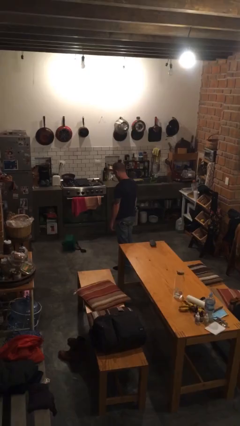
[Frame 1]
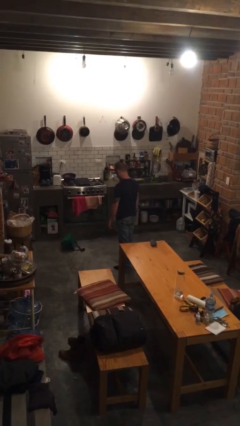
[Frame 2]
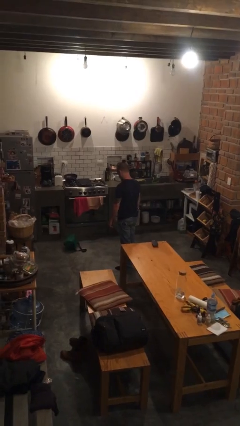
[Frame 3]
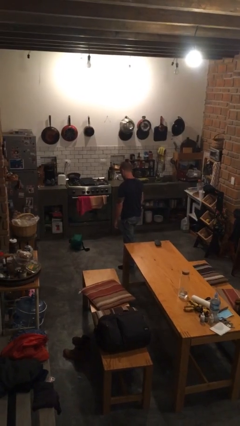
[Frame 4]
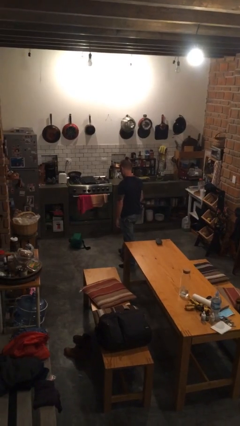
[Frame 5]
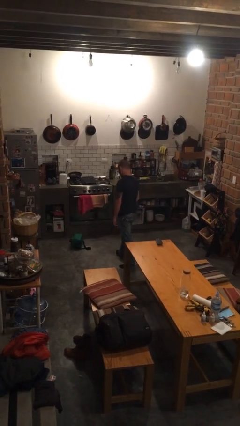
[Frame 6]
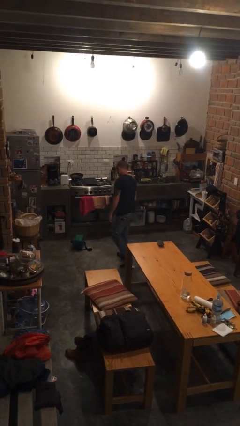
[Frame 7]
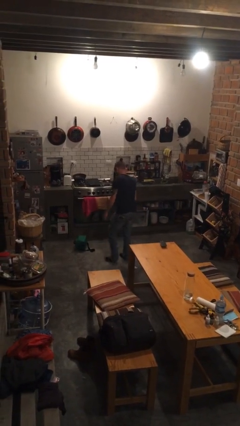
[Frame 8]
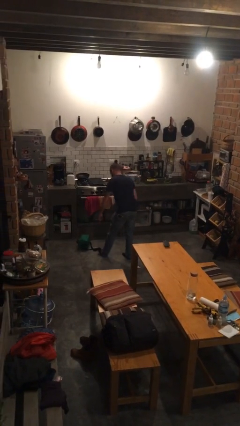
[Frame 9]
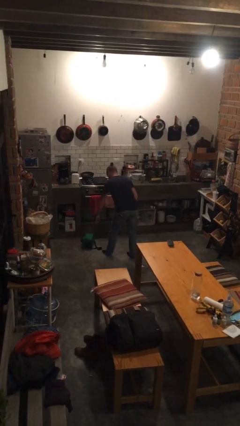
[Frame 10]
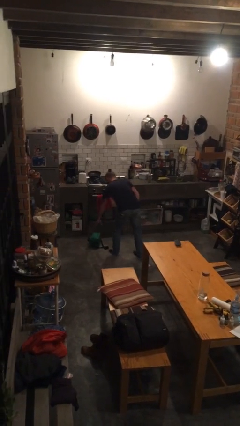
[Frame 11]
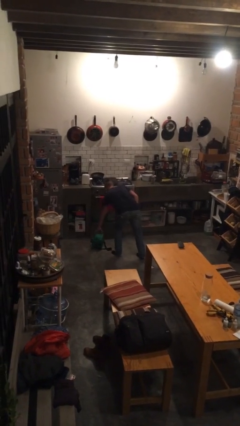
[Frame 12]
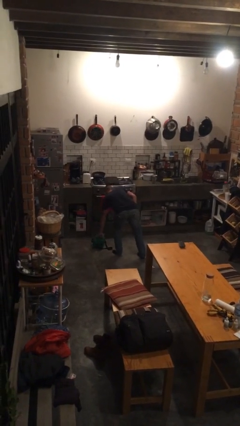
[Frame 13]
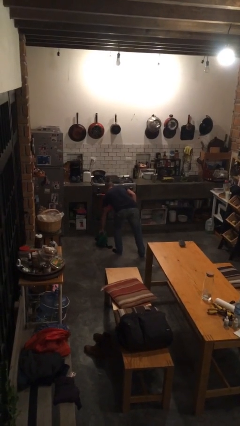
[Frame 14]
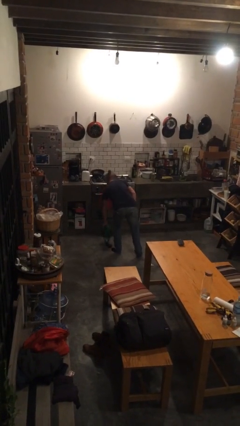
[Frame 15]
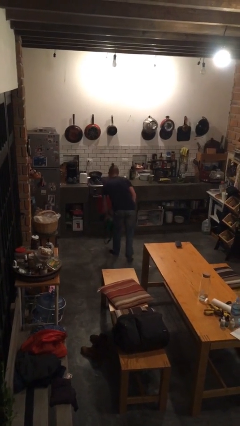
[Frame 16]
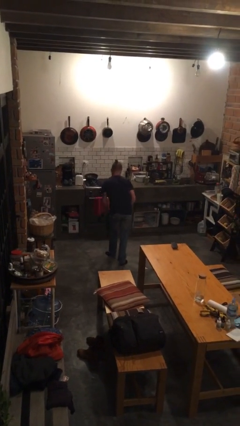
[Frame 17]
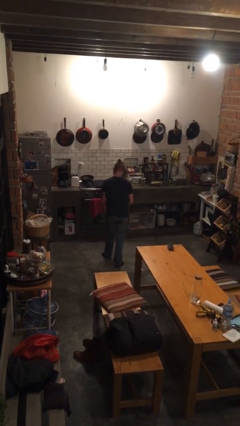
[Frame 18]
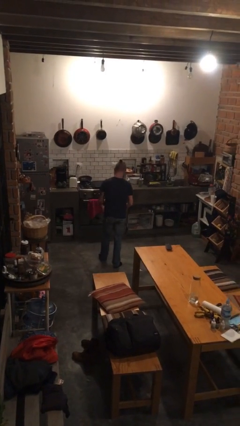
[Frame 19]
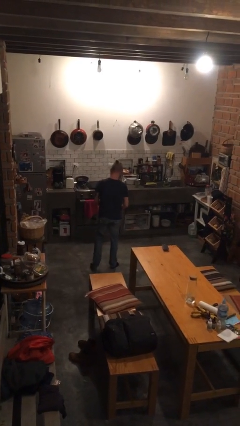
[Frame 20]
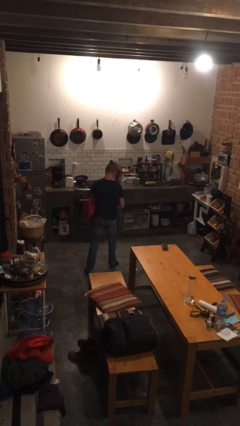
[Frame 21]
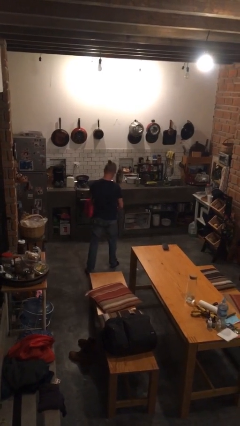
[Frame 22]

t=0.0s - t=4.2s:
person picks up object from floor

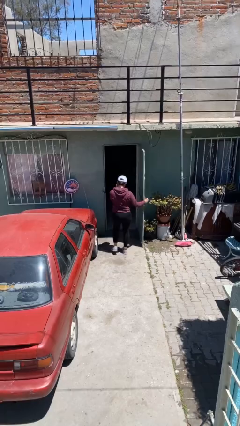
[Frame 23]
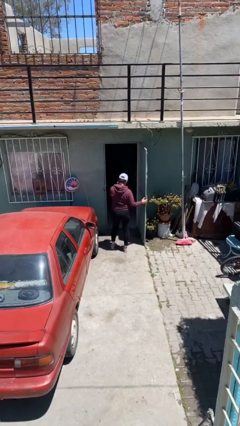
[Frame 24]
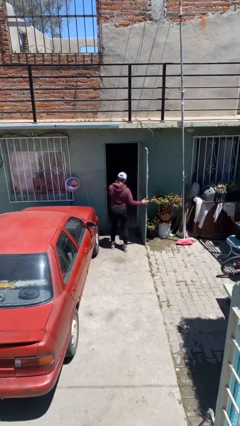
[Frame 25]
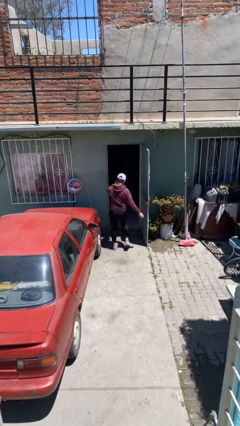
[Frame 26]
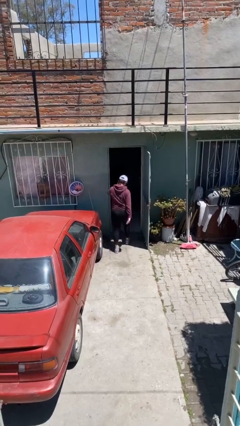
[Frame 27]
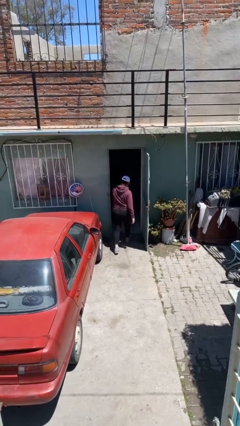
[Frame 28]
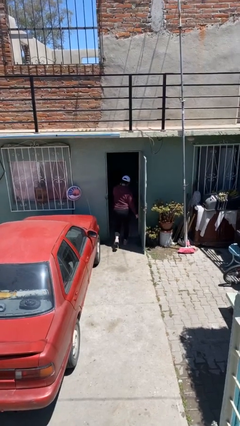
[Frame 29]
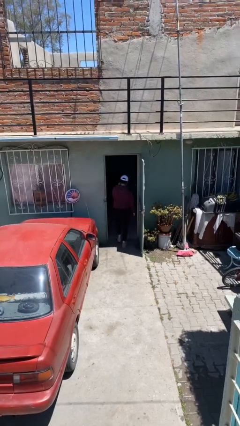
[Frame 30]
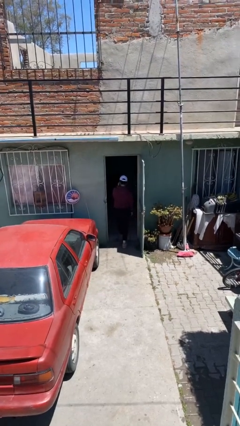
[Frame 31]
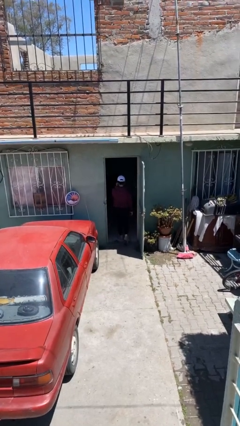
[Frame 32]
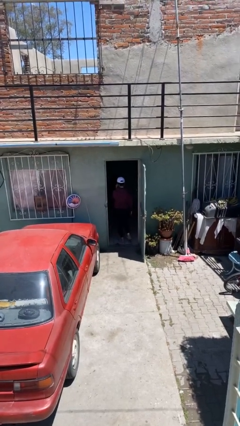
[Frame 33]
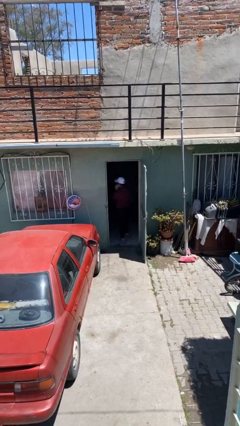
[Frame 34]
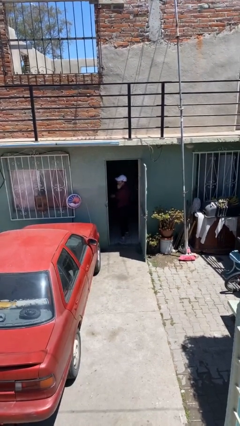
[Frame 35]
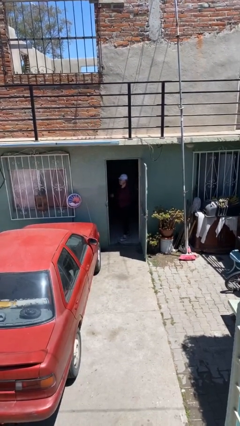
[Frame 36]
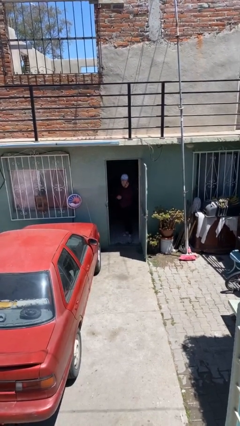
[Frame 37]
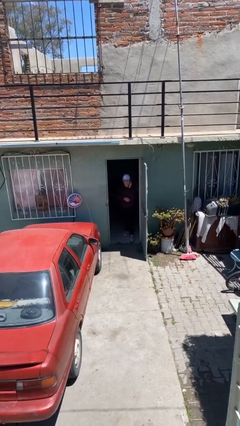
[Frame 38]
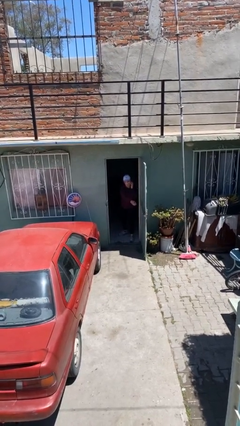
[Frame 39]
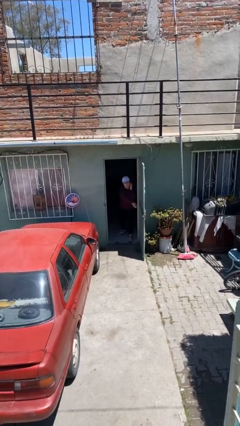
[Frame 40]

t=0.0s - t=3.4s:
person exits scene through structure

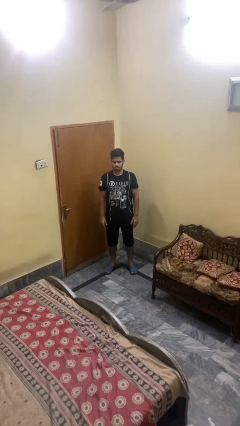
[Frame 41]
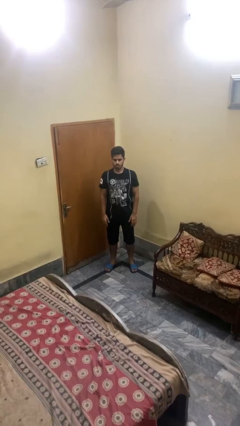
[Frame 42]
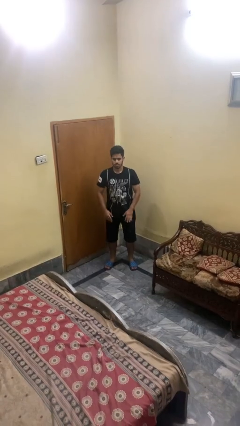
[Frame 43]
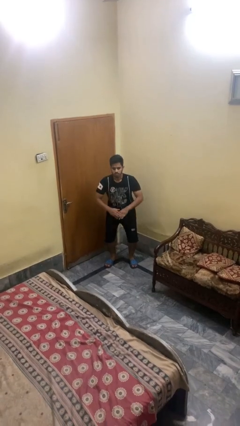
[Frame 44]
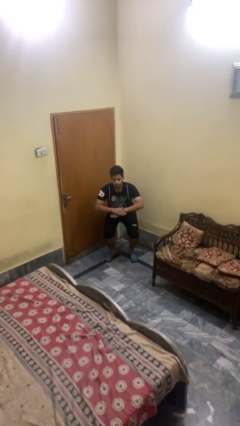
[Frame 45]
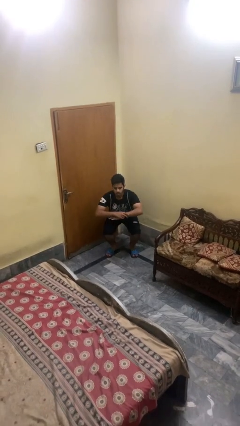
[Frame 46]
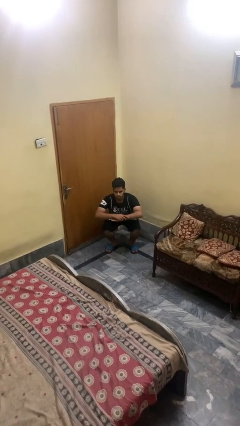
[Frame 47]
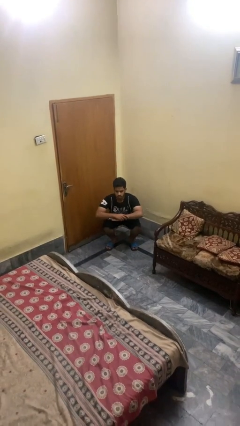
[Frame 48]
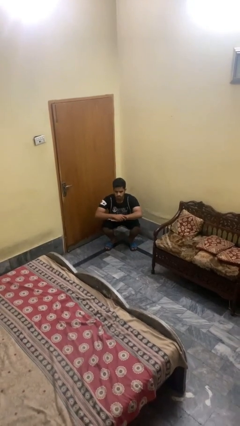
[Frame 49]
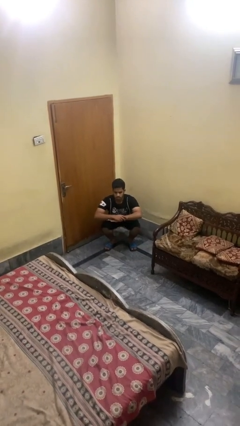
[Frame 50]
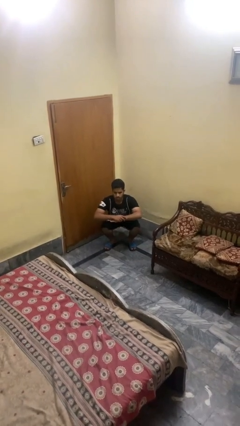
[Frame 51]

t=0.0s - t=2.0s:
person squats

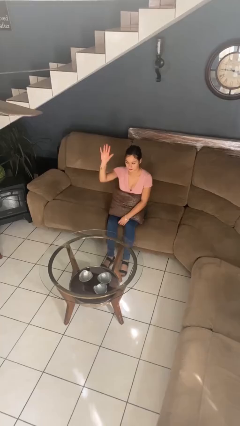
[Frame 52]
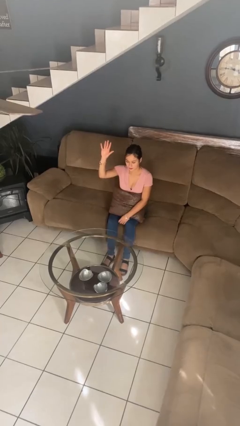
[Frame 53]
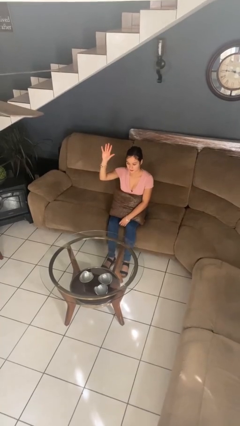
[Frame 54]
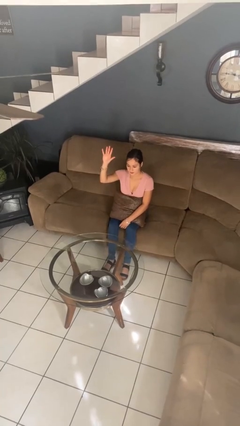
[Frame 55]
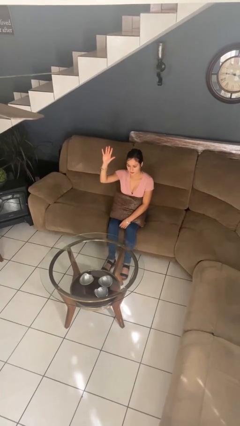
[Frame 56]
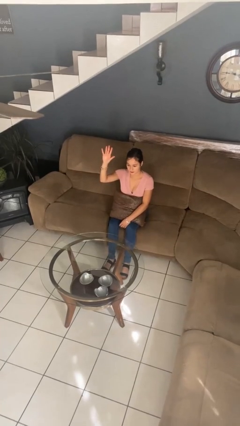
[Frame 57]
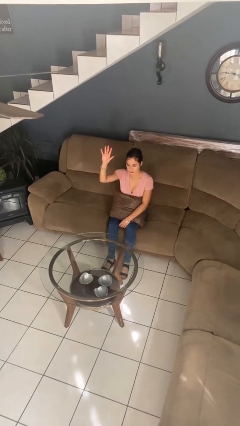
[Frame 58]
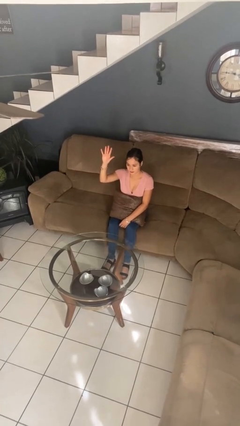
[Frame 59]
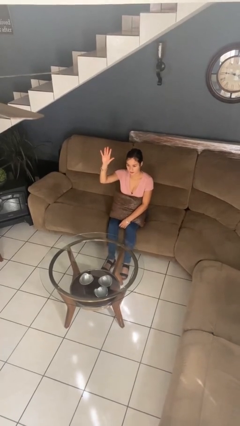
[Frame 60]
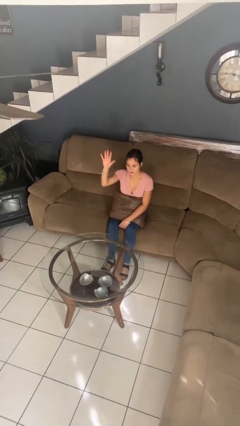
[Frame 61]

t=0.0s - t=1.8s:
person gestures number five

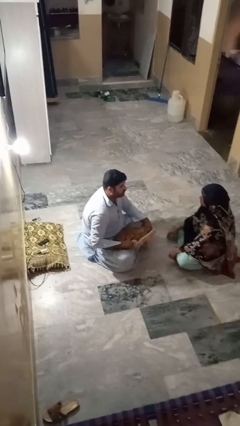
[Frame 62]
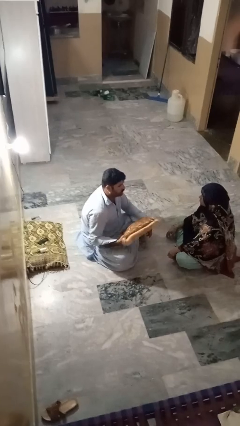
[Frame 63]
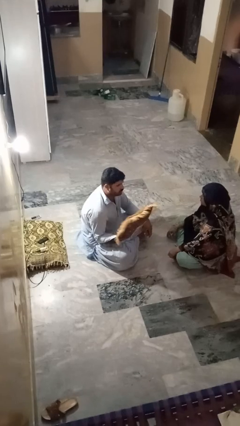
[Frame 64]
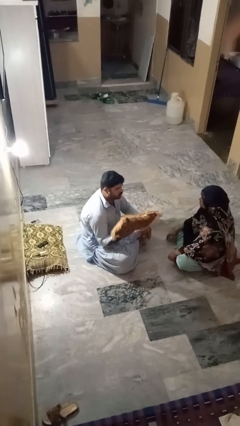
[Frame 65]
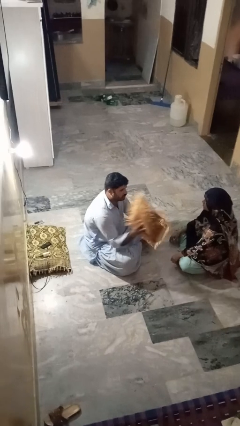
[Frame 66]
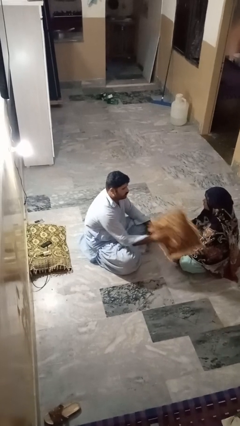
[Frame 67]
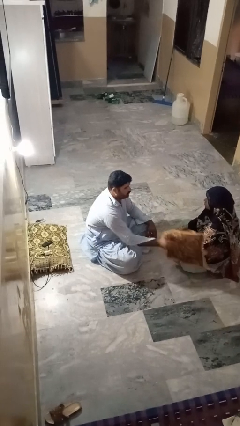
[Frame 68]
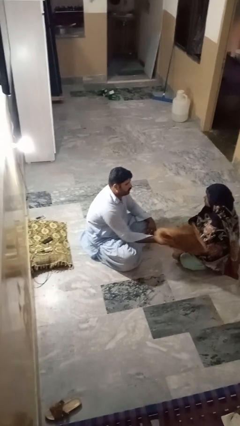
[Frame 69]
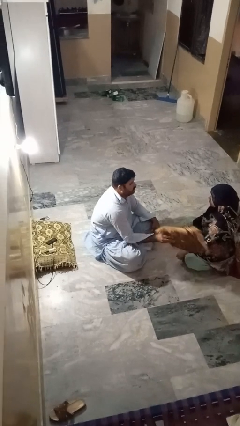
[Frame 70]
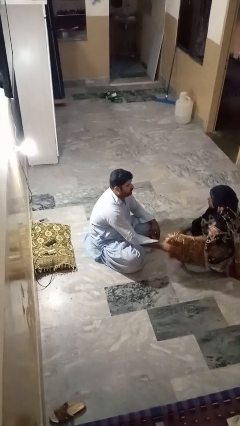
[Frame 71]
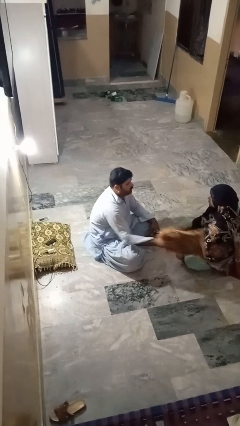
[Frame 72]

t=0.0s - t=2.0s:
person hits person with pillow

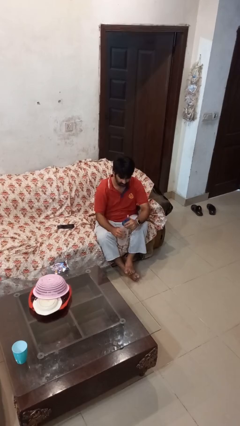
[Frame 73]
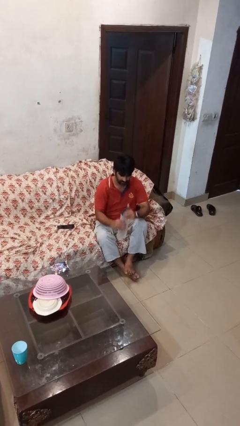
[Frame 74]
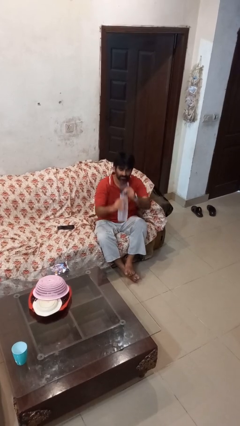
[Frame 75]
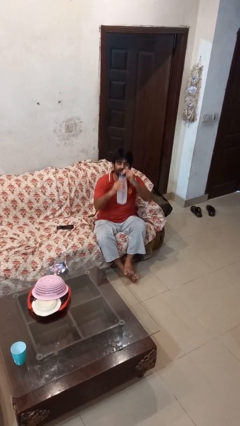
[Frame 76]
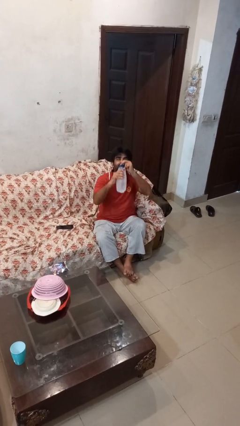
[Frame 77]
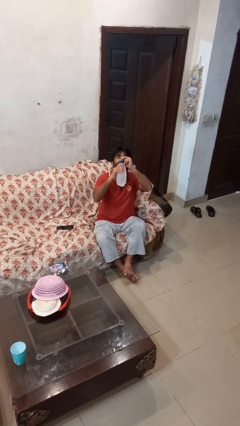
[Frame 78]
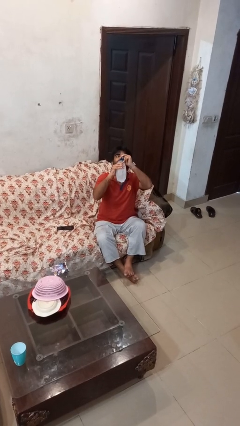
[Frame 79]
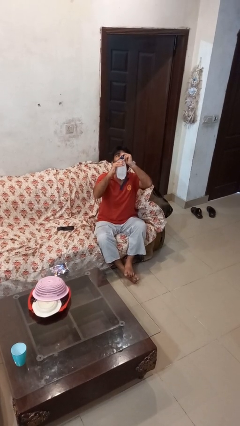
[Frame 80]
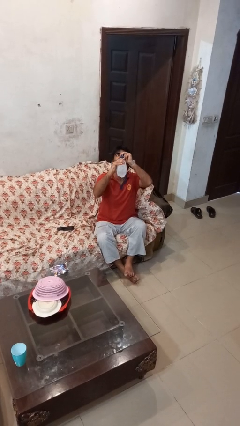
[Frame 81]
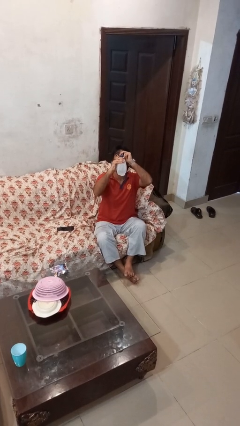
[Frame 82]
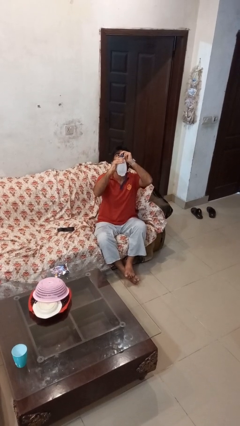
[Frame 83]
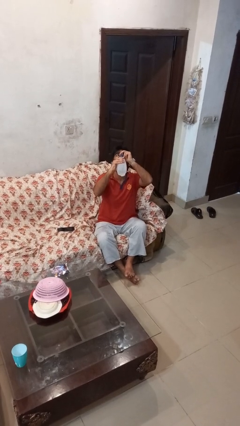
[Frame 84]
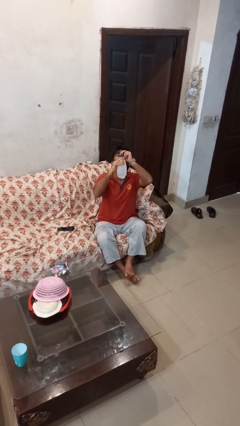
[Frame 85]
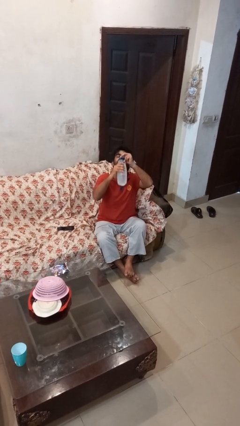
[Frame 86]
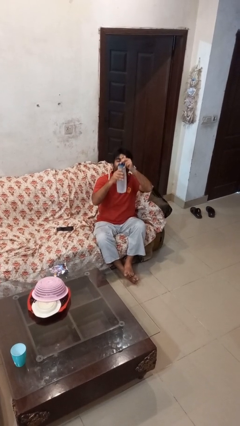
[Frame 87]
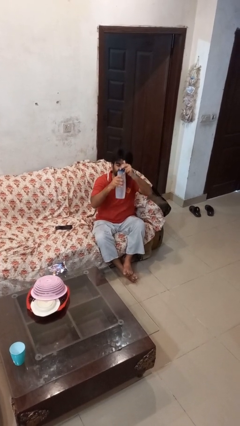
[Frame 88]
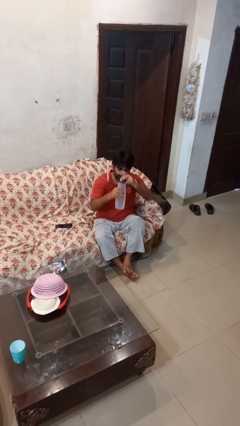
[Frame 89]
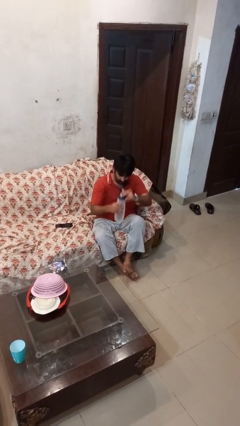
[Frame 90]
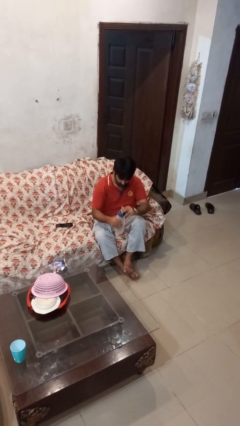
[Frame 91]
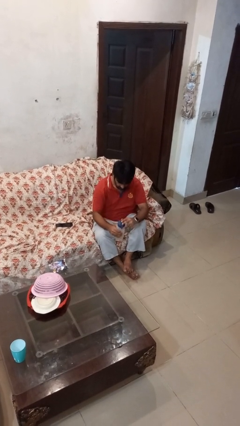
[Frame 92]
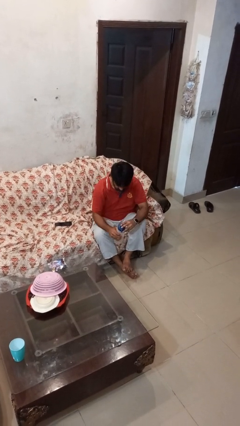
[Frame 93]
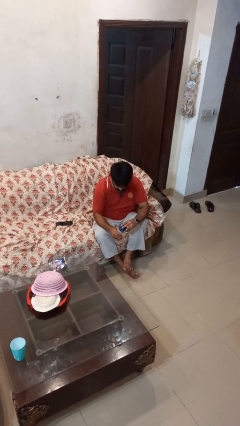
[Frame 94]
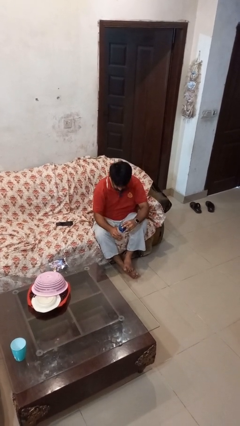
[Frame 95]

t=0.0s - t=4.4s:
person drinks from bottle
